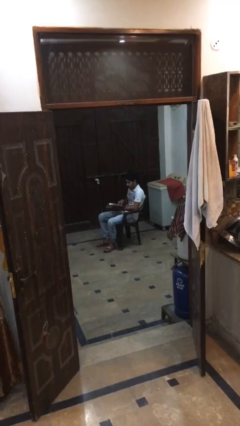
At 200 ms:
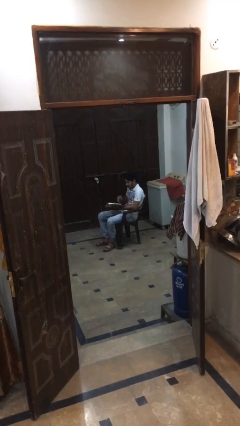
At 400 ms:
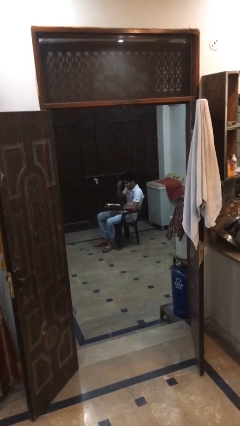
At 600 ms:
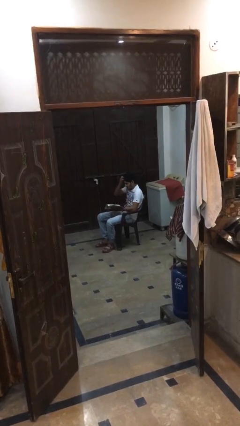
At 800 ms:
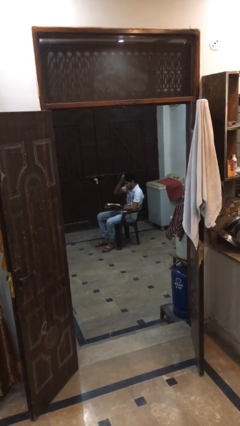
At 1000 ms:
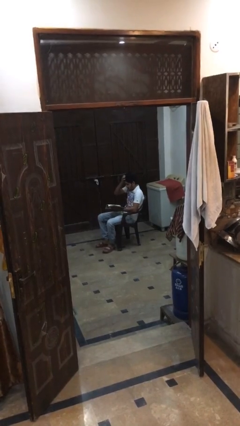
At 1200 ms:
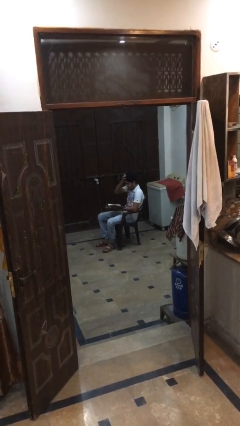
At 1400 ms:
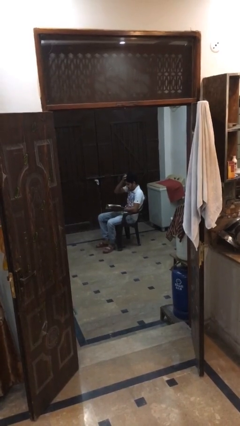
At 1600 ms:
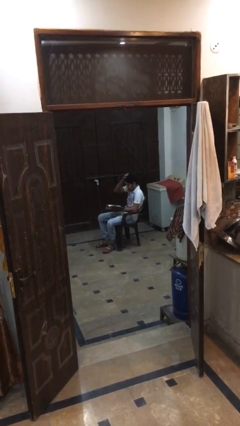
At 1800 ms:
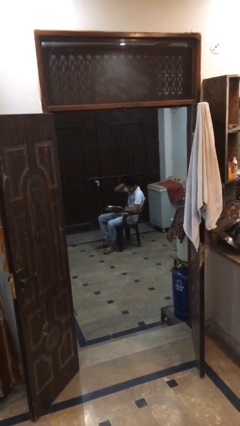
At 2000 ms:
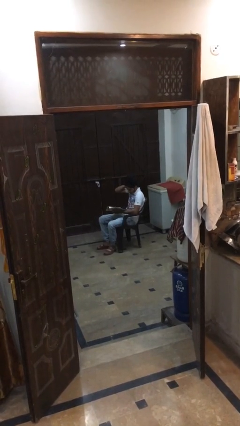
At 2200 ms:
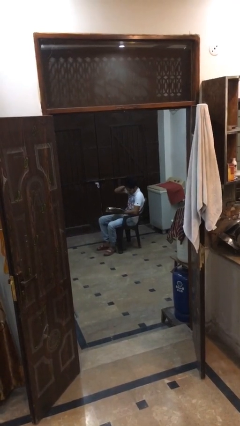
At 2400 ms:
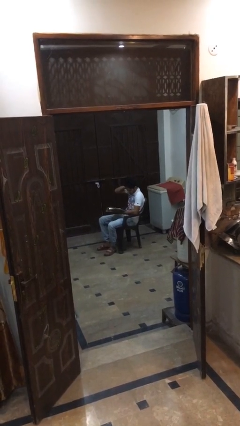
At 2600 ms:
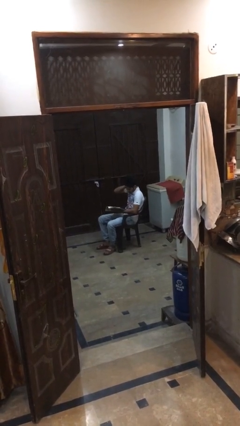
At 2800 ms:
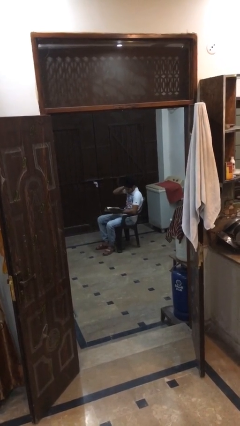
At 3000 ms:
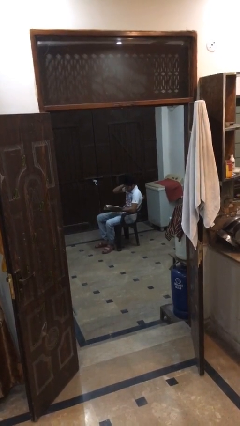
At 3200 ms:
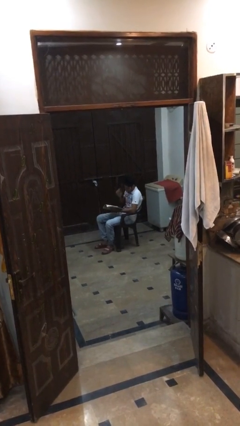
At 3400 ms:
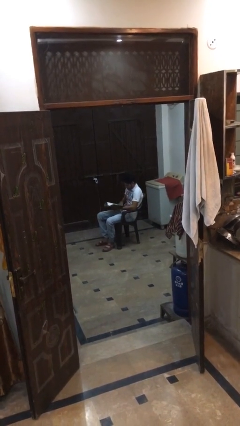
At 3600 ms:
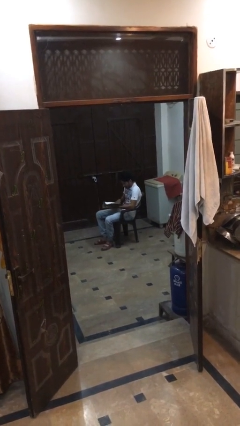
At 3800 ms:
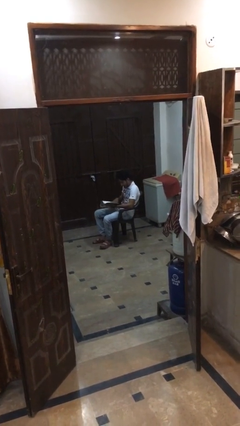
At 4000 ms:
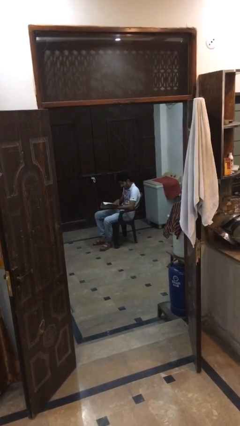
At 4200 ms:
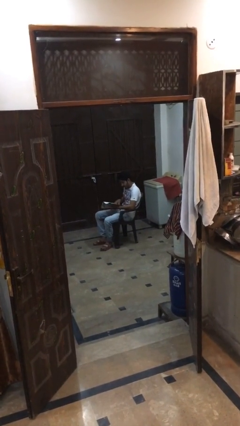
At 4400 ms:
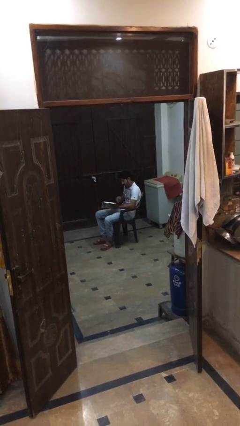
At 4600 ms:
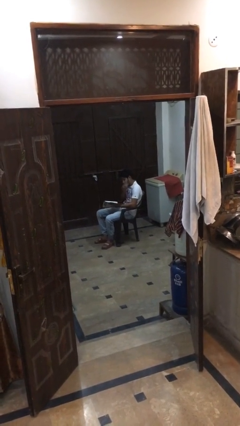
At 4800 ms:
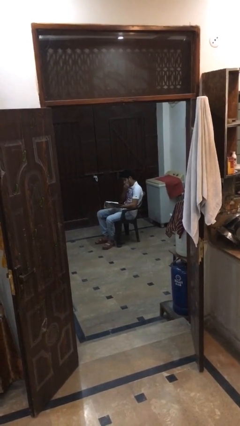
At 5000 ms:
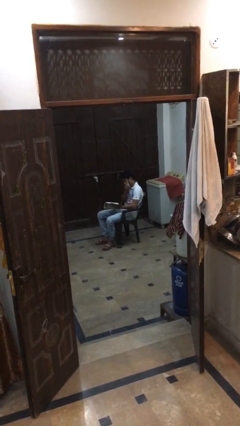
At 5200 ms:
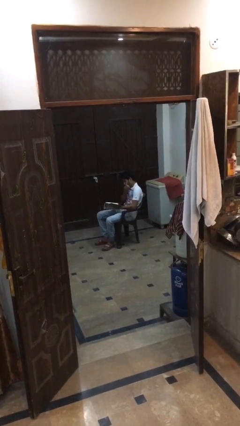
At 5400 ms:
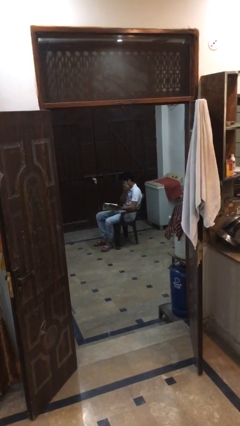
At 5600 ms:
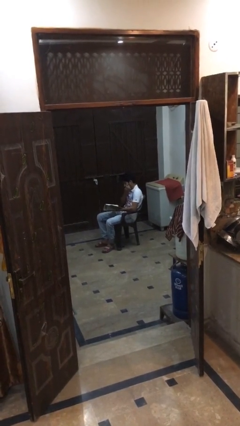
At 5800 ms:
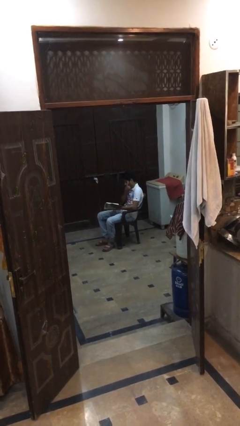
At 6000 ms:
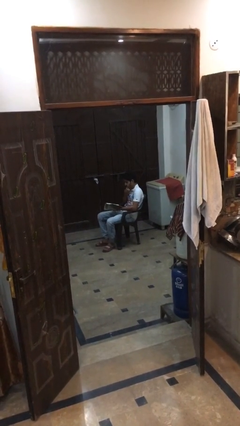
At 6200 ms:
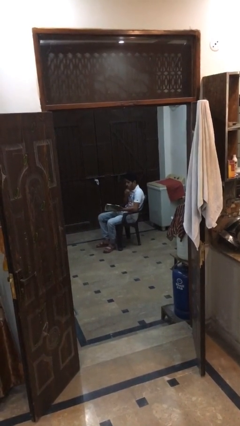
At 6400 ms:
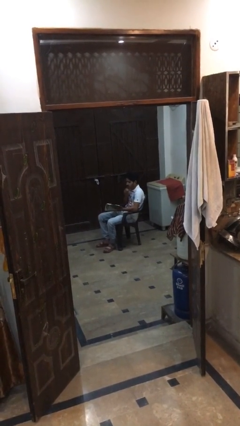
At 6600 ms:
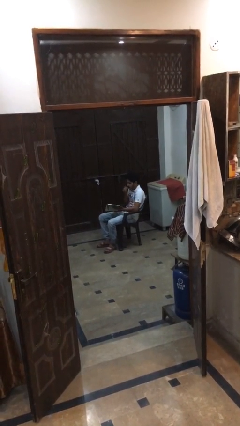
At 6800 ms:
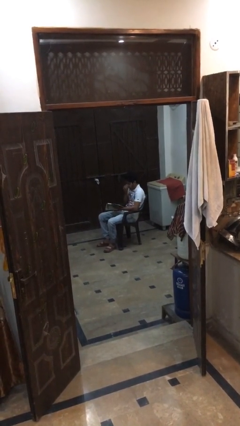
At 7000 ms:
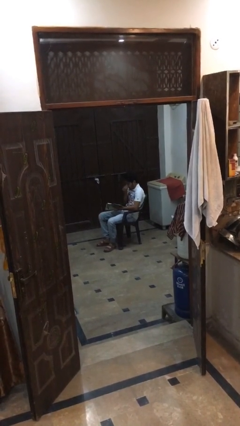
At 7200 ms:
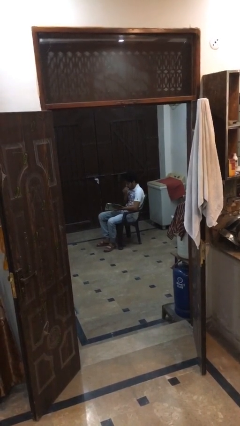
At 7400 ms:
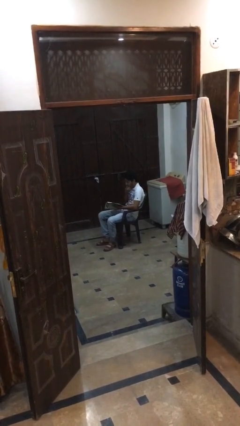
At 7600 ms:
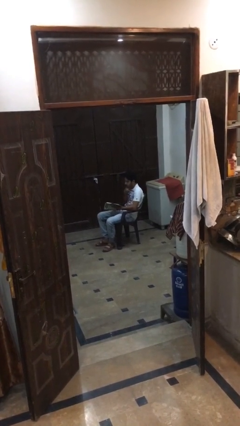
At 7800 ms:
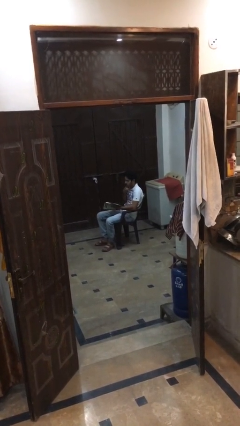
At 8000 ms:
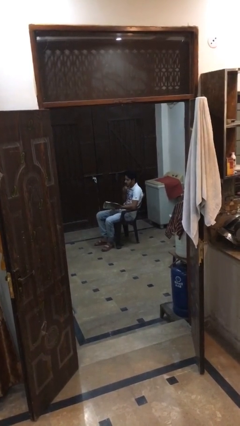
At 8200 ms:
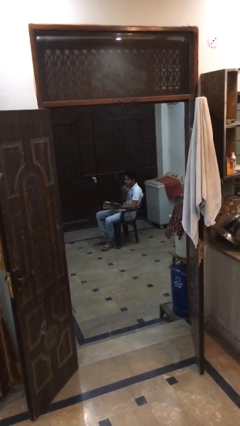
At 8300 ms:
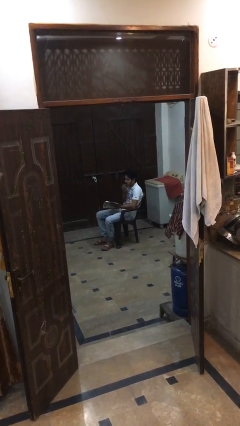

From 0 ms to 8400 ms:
person reads document

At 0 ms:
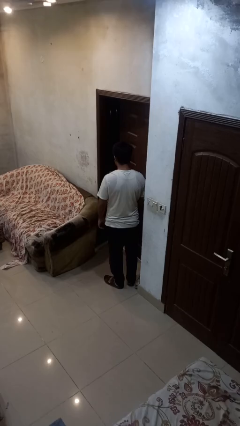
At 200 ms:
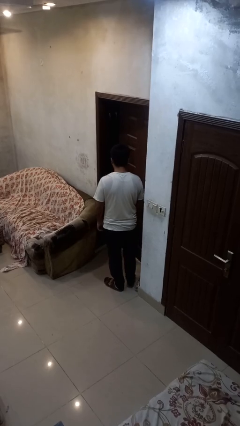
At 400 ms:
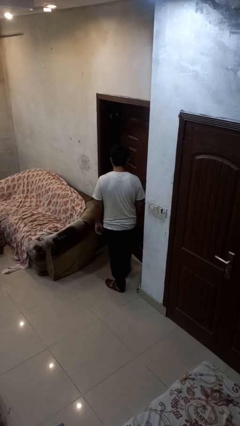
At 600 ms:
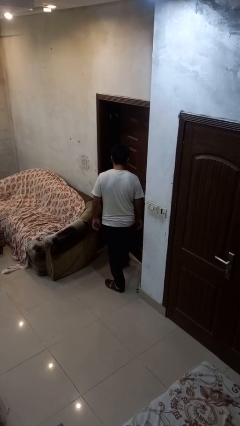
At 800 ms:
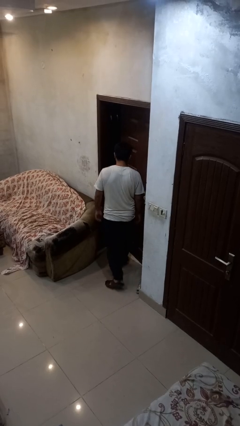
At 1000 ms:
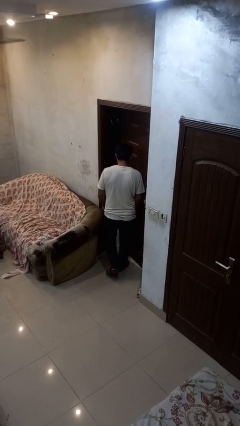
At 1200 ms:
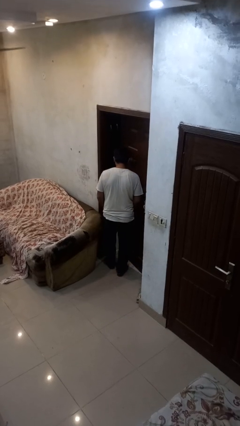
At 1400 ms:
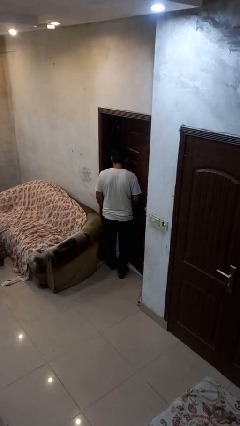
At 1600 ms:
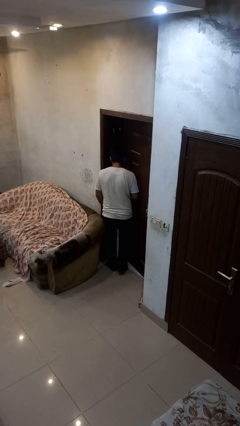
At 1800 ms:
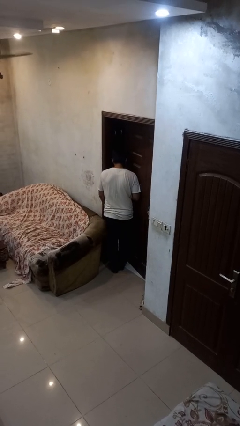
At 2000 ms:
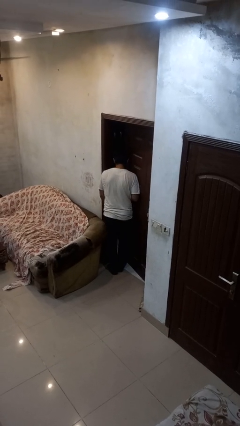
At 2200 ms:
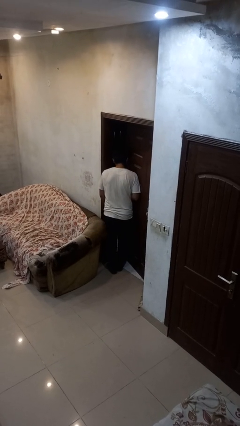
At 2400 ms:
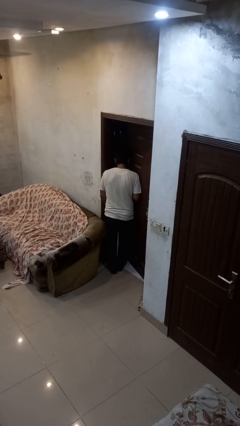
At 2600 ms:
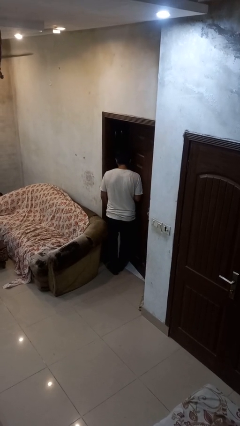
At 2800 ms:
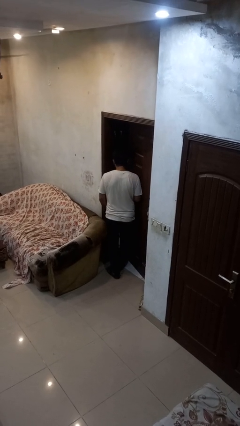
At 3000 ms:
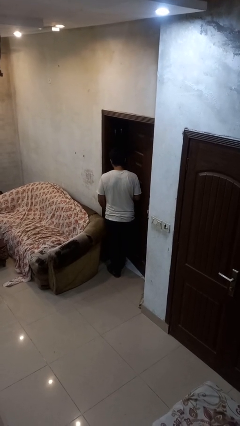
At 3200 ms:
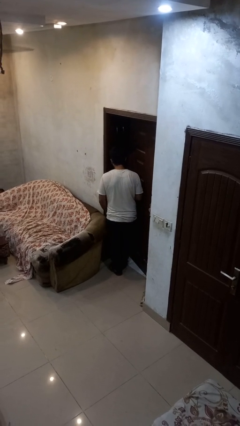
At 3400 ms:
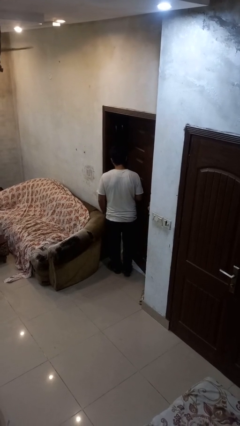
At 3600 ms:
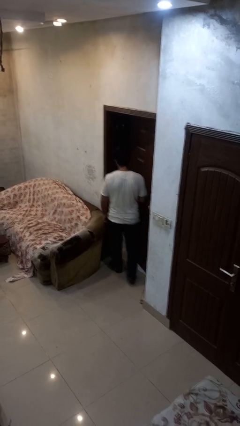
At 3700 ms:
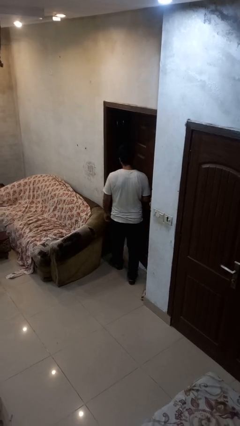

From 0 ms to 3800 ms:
person bumps into wall

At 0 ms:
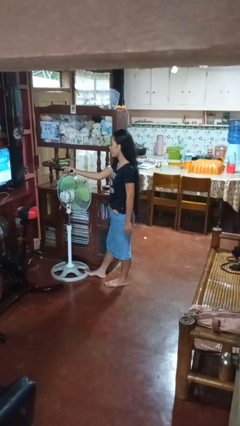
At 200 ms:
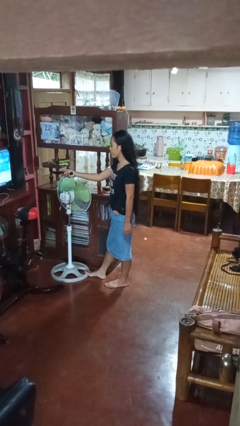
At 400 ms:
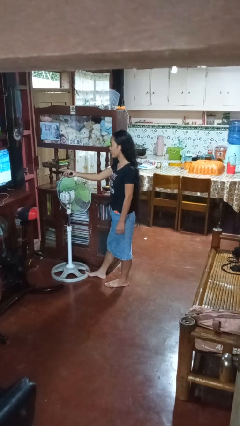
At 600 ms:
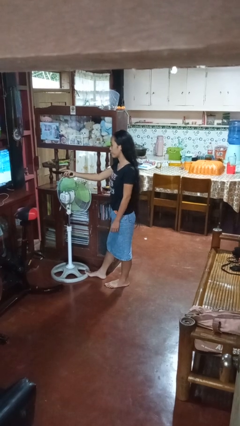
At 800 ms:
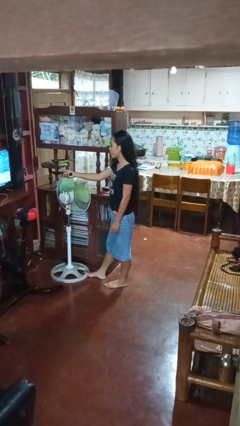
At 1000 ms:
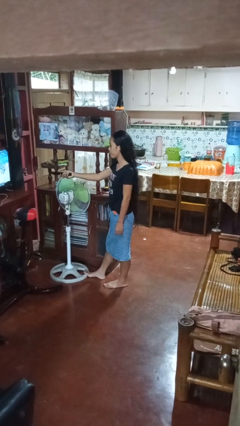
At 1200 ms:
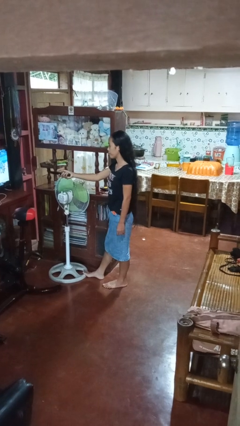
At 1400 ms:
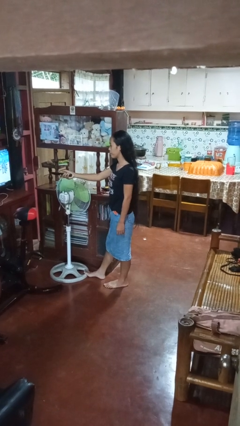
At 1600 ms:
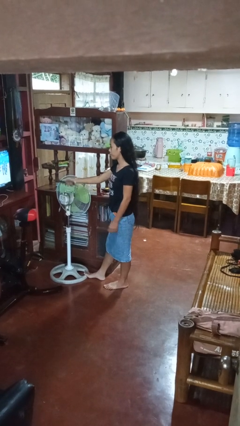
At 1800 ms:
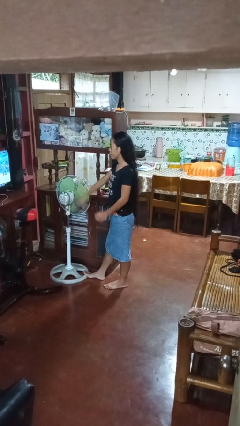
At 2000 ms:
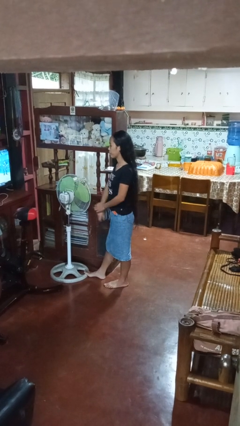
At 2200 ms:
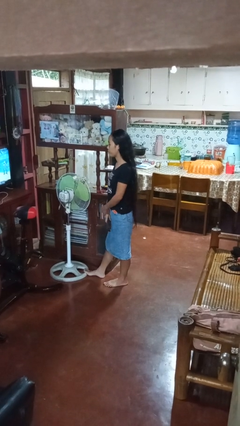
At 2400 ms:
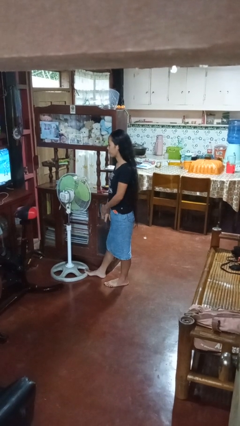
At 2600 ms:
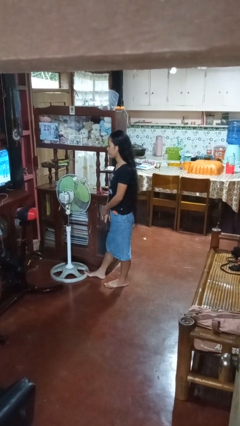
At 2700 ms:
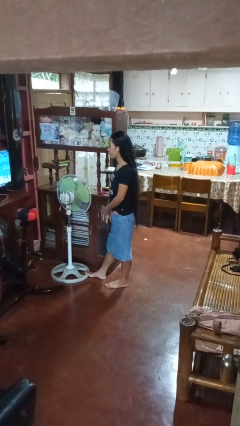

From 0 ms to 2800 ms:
person uses television remote

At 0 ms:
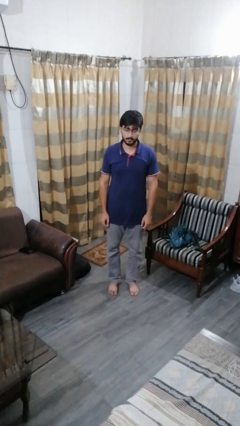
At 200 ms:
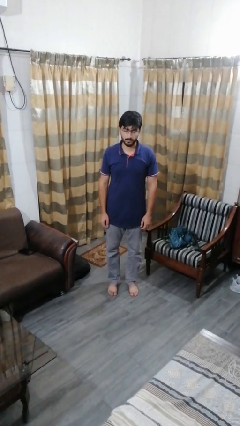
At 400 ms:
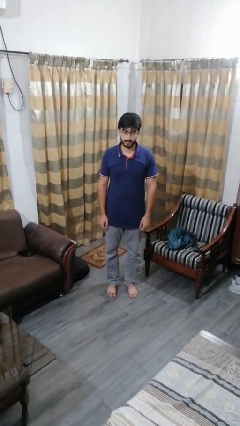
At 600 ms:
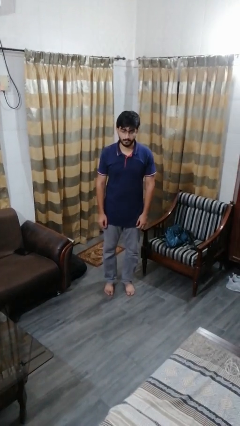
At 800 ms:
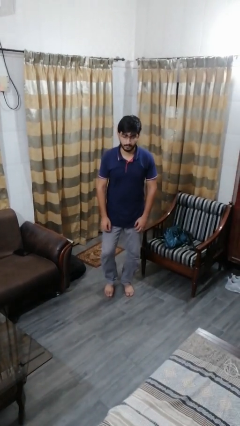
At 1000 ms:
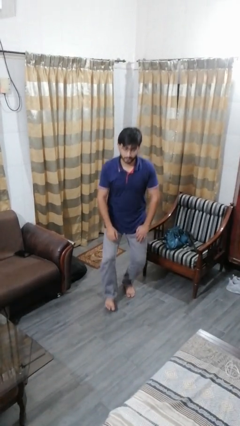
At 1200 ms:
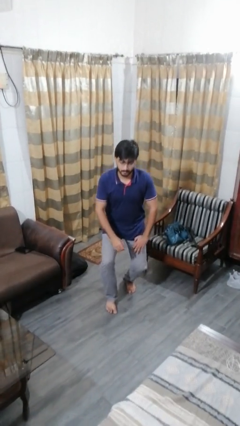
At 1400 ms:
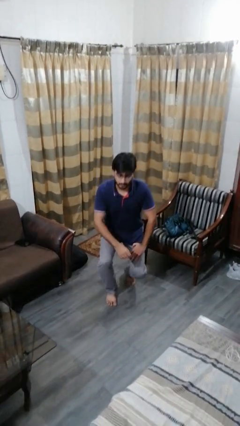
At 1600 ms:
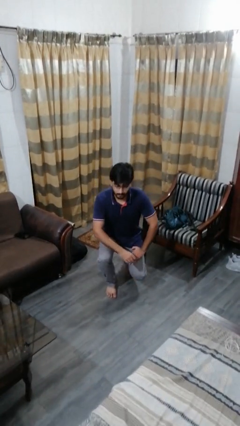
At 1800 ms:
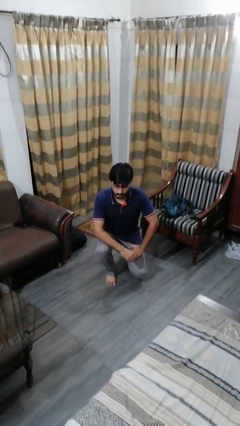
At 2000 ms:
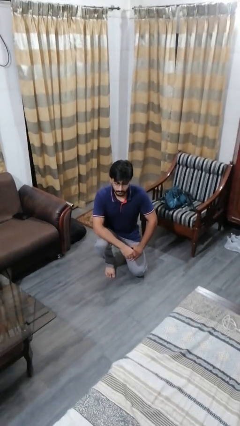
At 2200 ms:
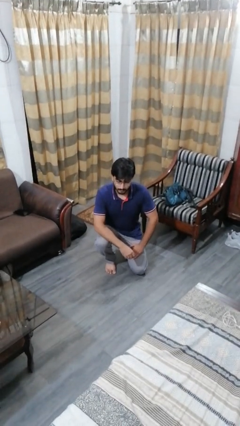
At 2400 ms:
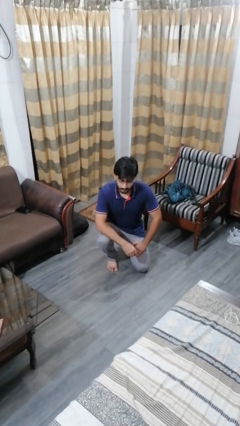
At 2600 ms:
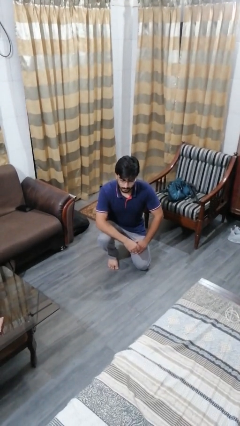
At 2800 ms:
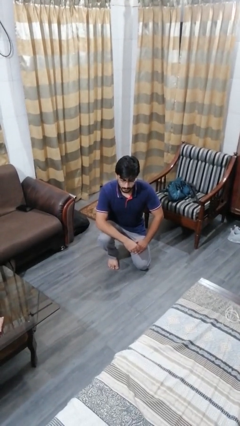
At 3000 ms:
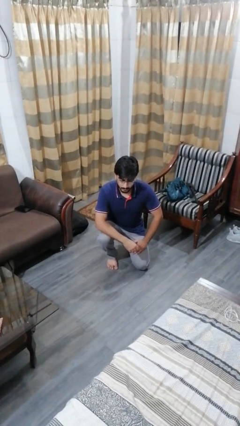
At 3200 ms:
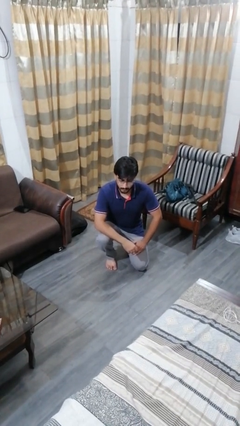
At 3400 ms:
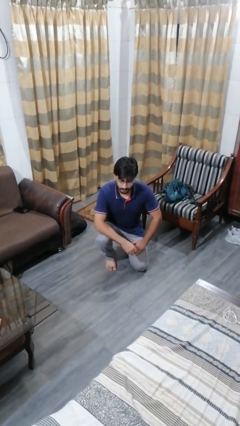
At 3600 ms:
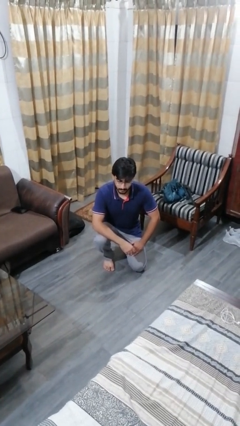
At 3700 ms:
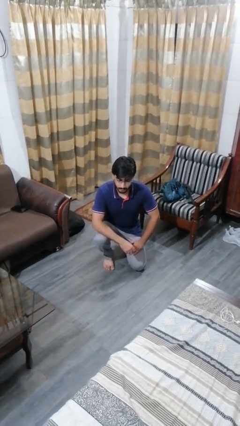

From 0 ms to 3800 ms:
person kneels
